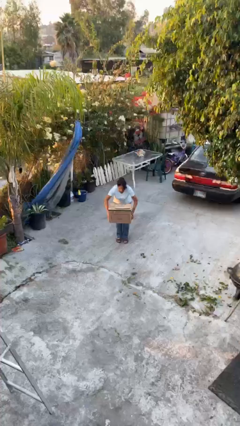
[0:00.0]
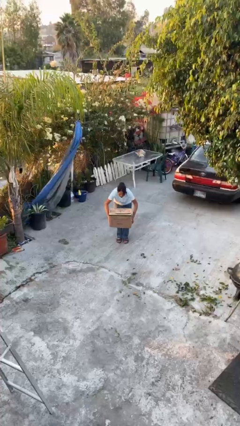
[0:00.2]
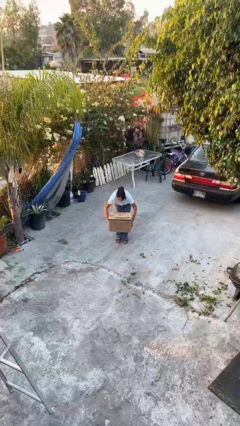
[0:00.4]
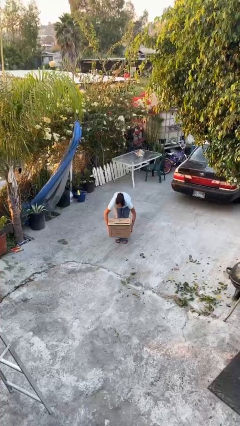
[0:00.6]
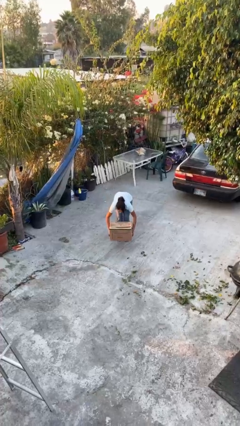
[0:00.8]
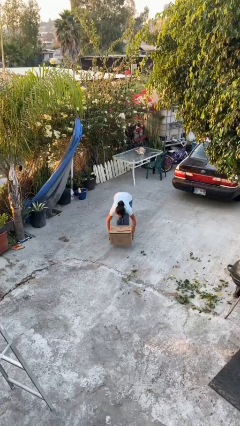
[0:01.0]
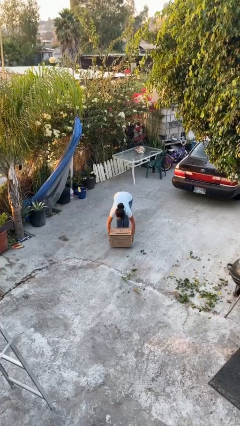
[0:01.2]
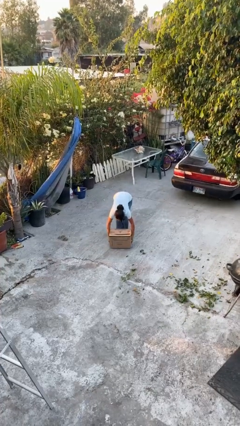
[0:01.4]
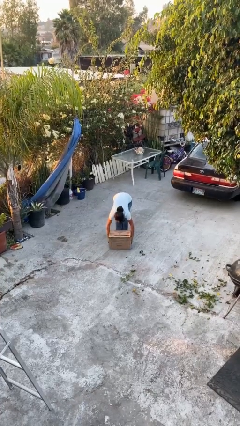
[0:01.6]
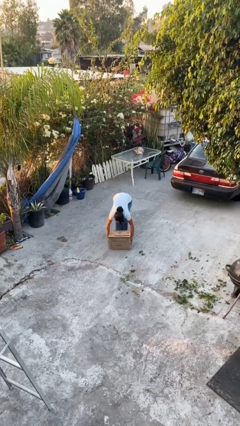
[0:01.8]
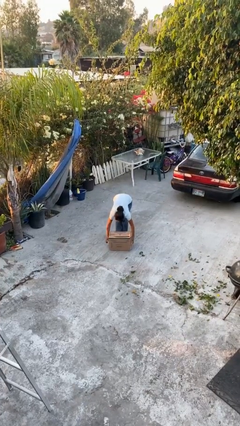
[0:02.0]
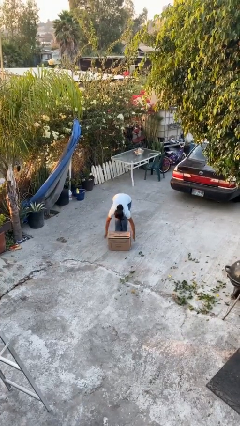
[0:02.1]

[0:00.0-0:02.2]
person puts down object on floor

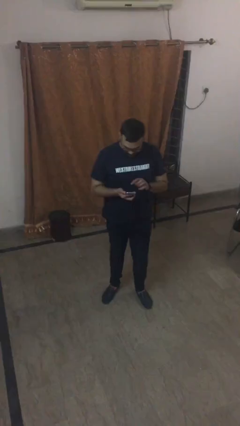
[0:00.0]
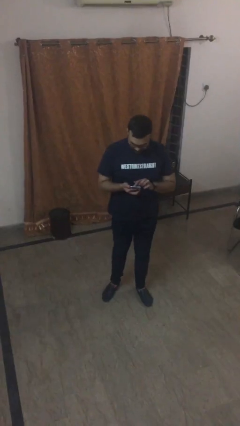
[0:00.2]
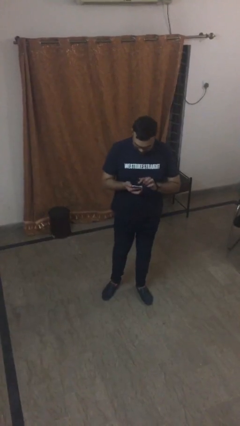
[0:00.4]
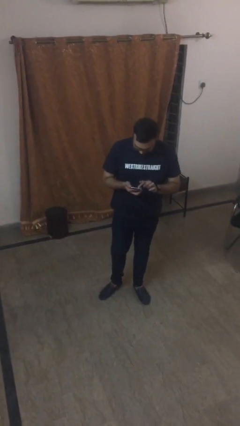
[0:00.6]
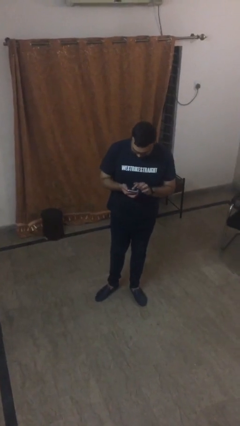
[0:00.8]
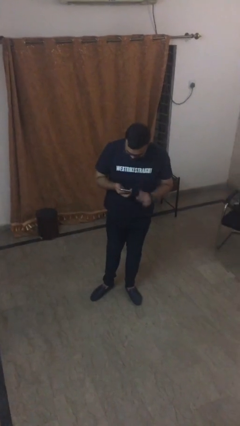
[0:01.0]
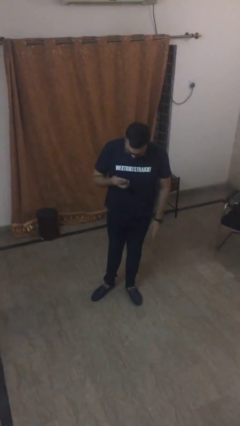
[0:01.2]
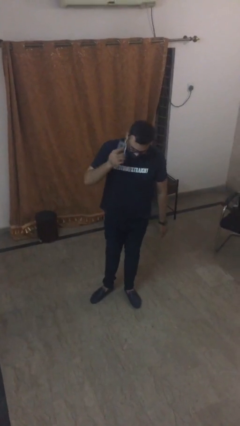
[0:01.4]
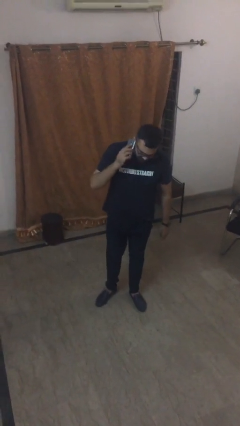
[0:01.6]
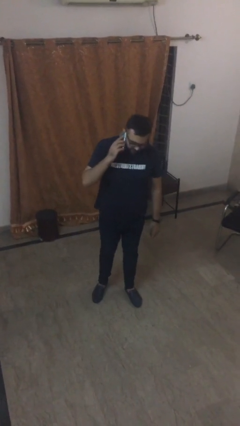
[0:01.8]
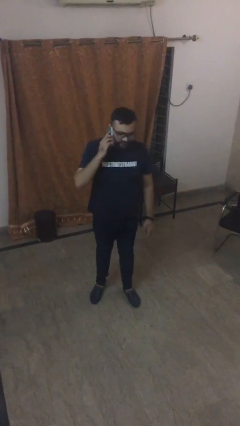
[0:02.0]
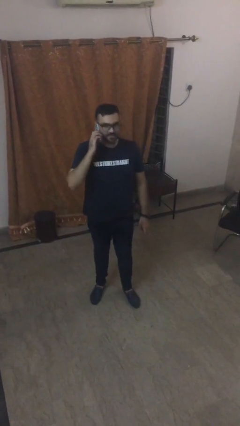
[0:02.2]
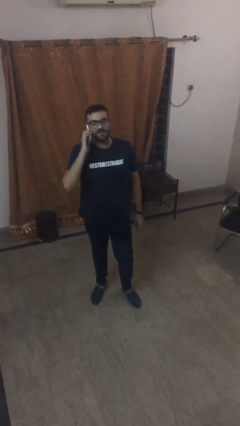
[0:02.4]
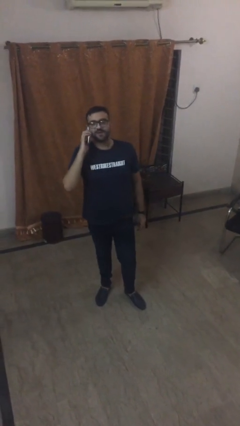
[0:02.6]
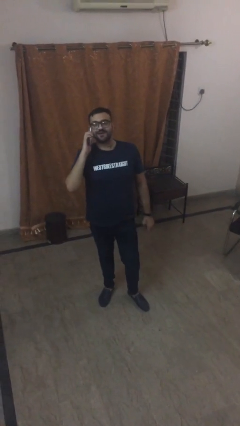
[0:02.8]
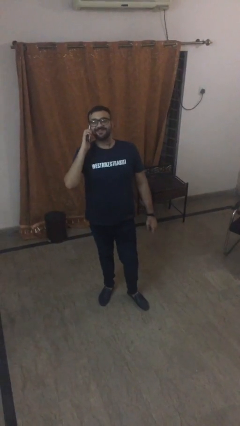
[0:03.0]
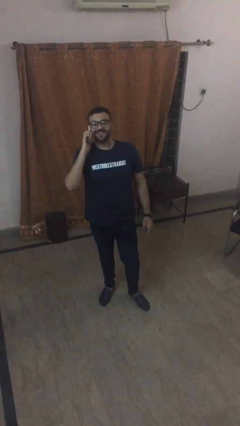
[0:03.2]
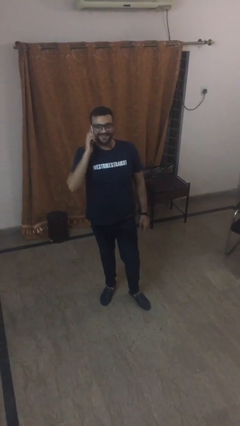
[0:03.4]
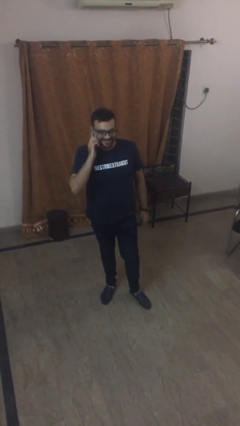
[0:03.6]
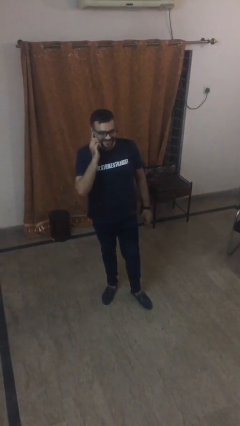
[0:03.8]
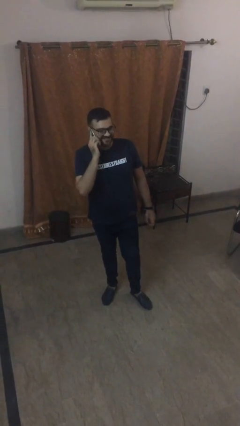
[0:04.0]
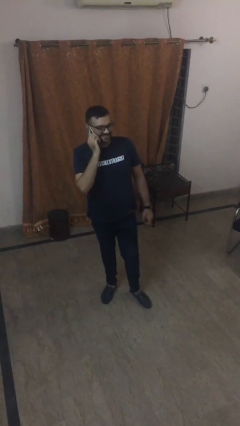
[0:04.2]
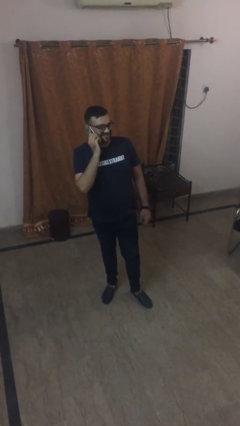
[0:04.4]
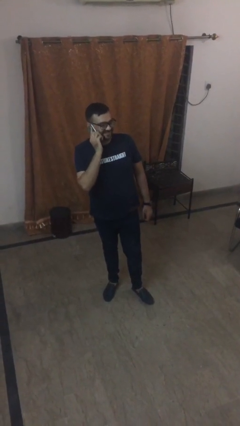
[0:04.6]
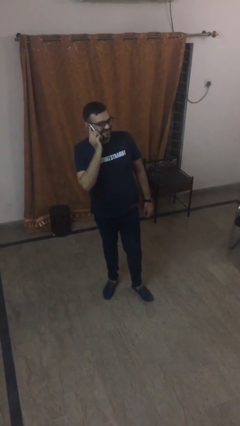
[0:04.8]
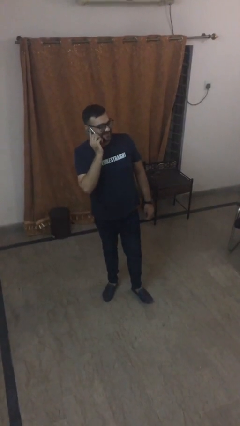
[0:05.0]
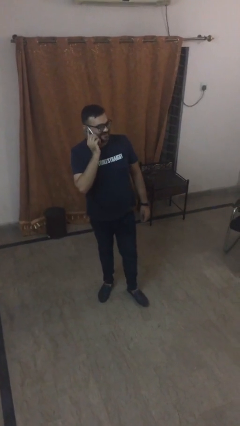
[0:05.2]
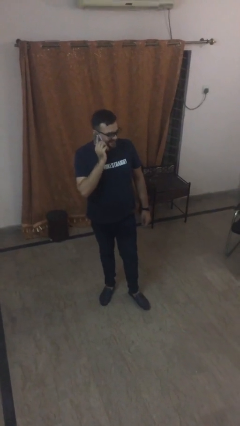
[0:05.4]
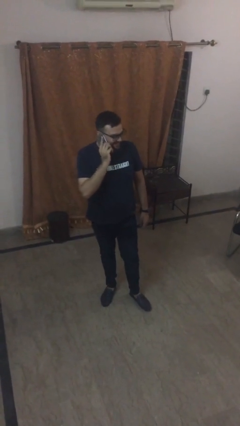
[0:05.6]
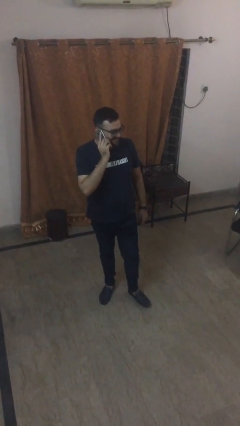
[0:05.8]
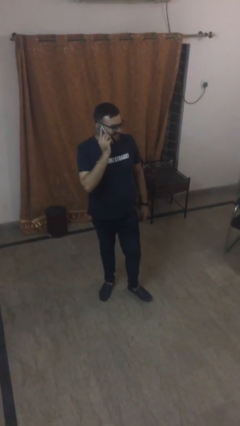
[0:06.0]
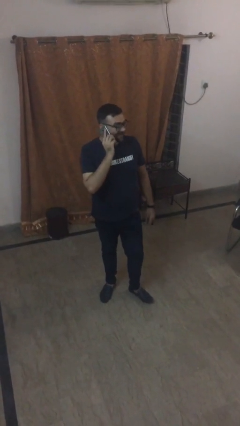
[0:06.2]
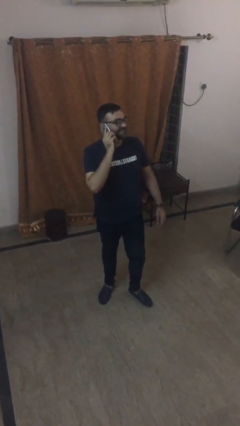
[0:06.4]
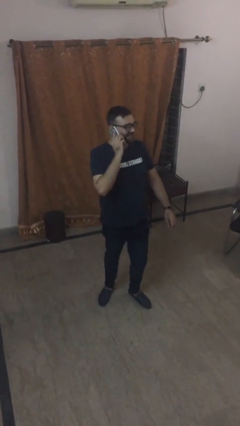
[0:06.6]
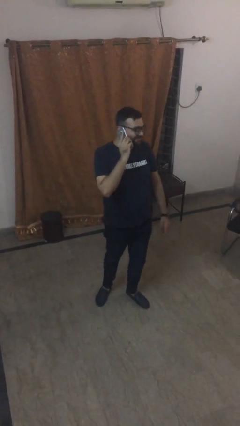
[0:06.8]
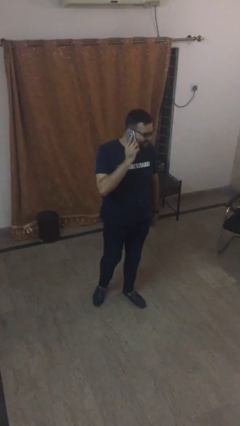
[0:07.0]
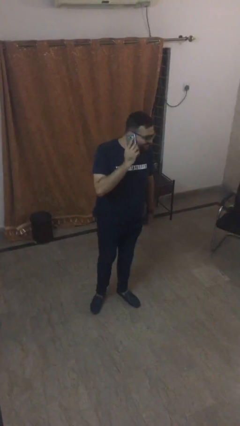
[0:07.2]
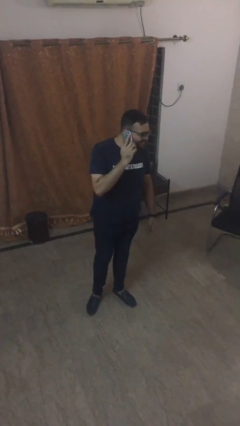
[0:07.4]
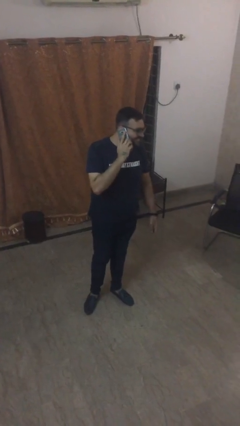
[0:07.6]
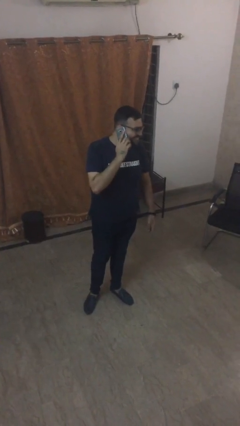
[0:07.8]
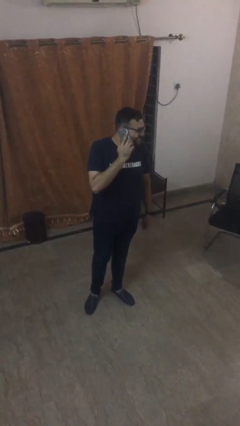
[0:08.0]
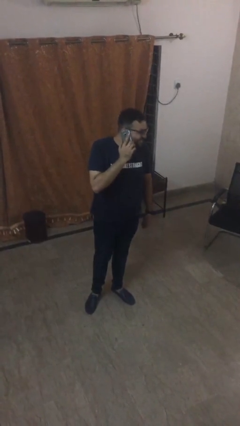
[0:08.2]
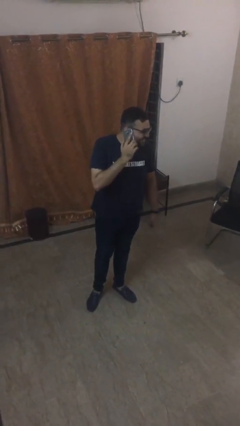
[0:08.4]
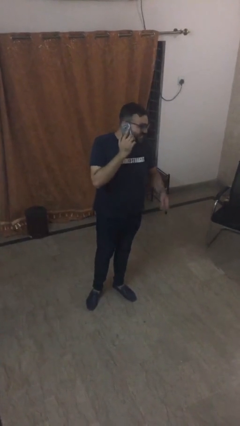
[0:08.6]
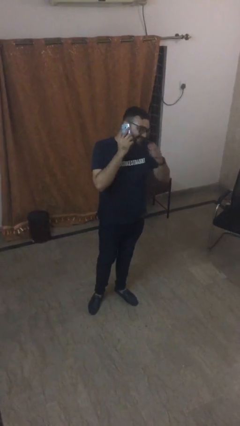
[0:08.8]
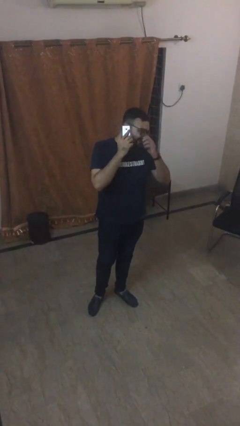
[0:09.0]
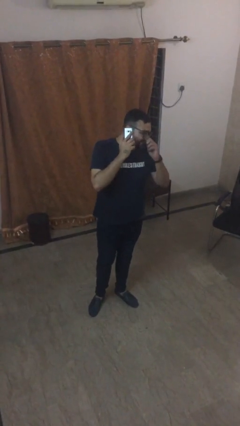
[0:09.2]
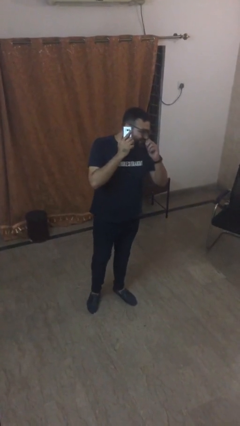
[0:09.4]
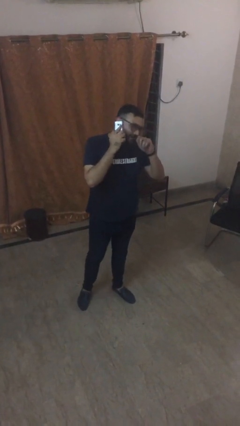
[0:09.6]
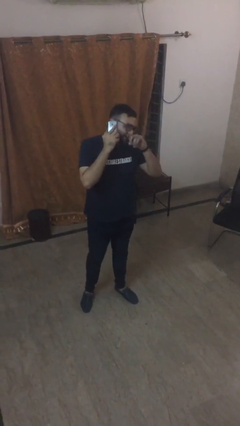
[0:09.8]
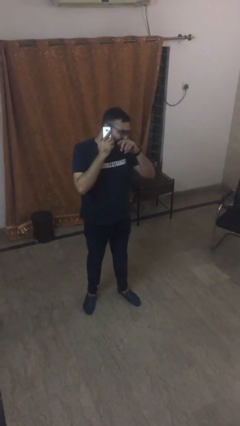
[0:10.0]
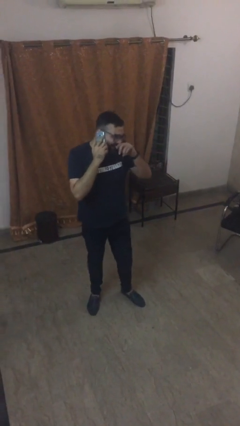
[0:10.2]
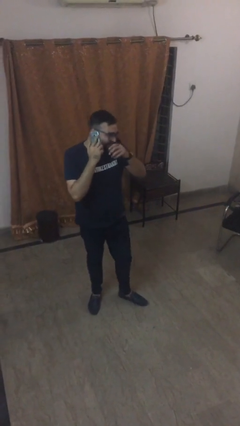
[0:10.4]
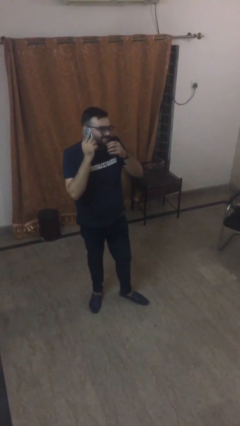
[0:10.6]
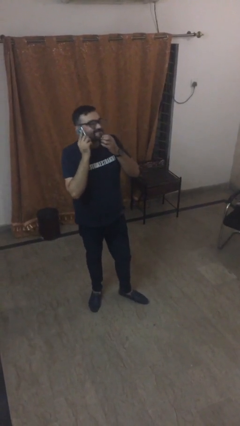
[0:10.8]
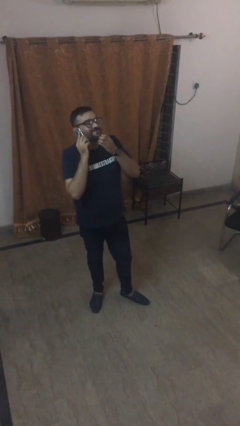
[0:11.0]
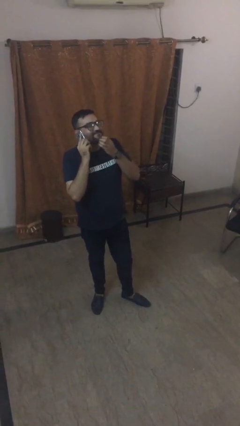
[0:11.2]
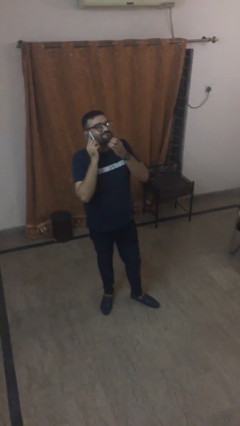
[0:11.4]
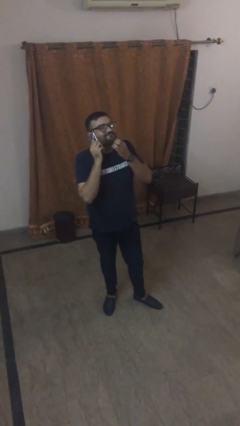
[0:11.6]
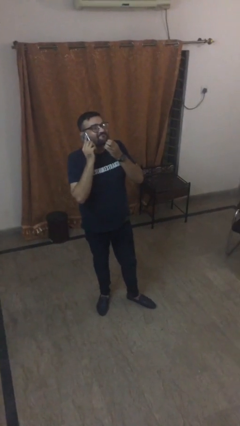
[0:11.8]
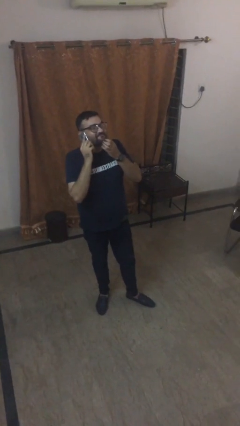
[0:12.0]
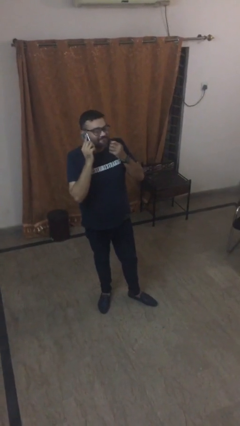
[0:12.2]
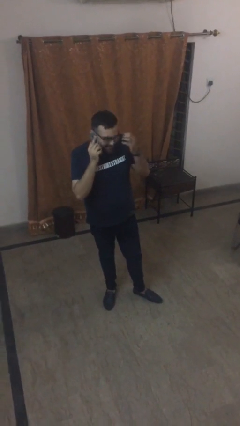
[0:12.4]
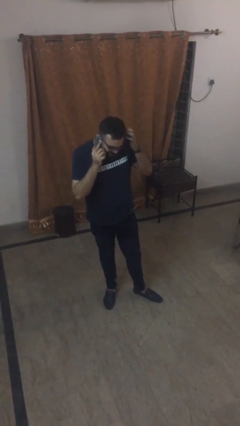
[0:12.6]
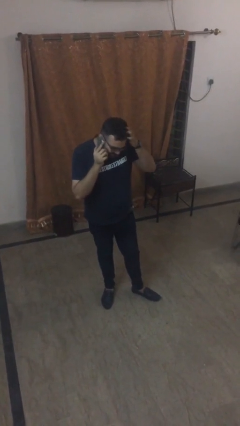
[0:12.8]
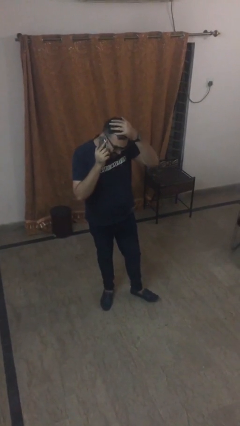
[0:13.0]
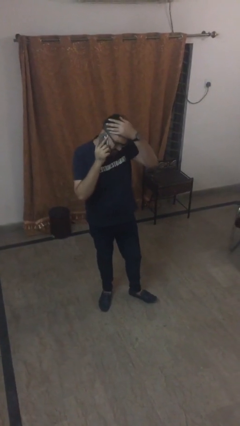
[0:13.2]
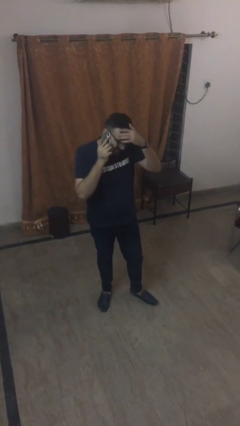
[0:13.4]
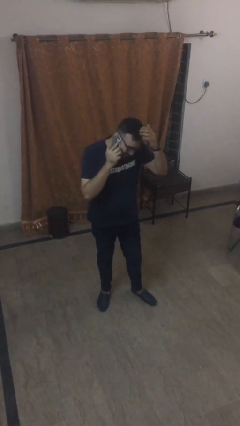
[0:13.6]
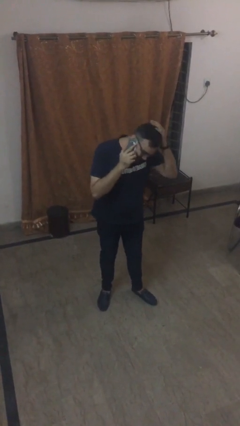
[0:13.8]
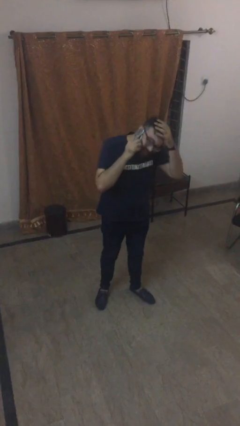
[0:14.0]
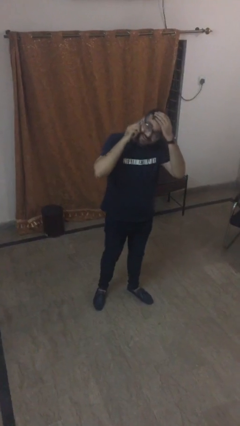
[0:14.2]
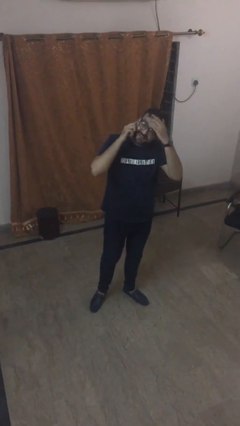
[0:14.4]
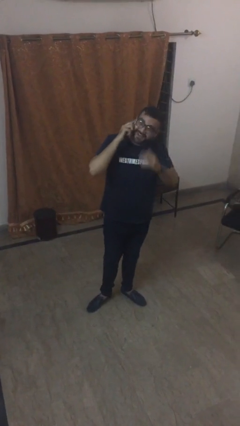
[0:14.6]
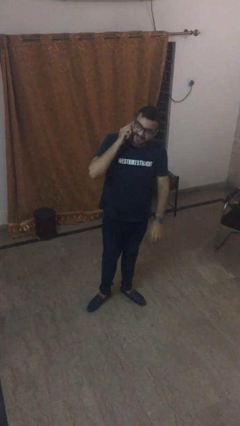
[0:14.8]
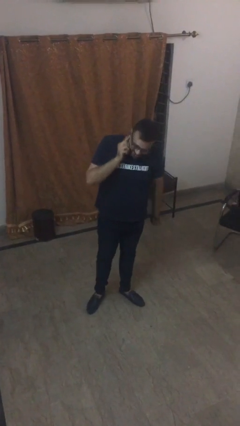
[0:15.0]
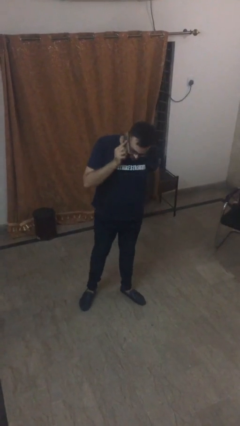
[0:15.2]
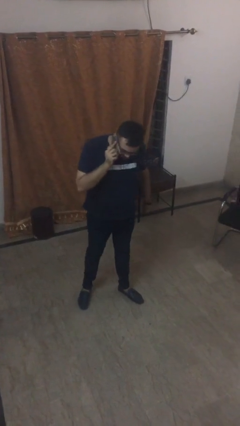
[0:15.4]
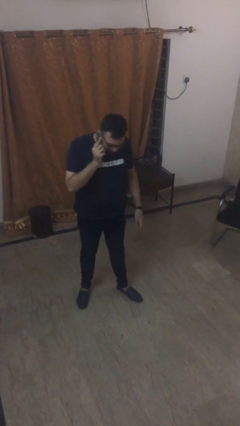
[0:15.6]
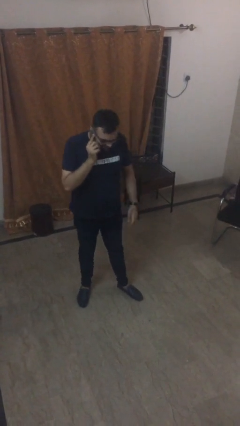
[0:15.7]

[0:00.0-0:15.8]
person talks on phone

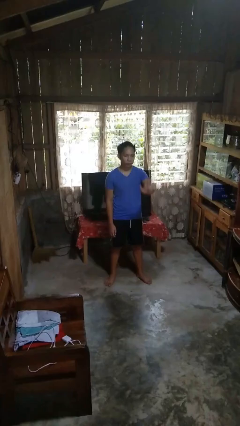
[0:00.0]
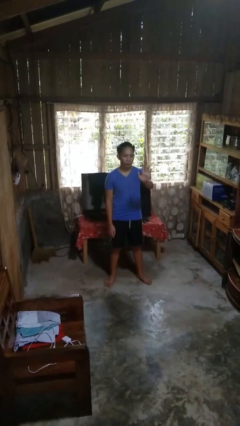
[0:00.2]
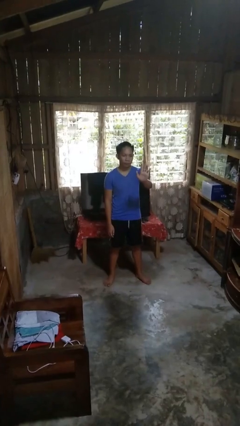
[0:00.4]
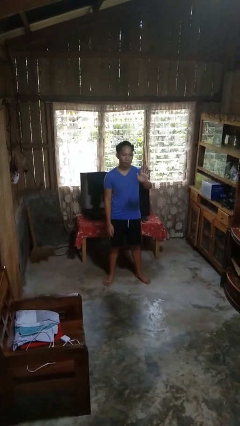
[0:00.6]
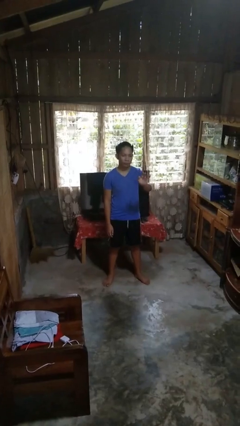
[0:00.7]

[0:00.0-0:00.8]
person gestures stop
